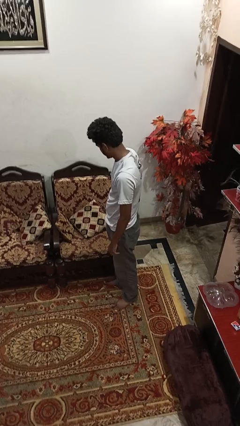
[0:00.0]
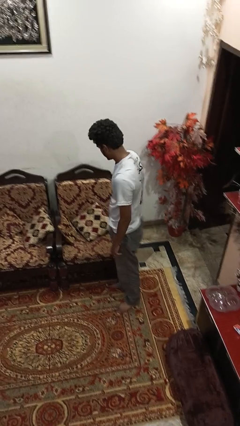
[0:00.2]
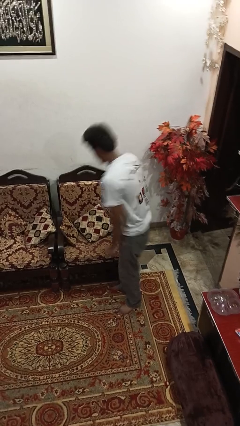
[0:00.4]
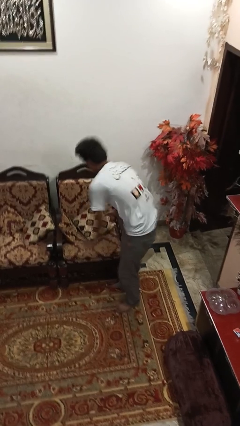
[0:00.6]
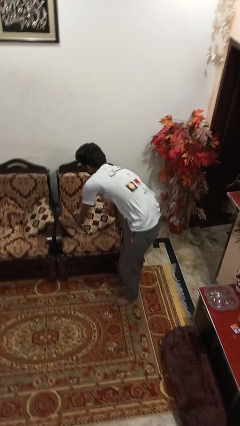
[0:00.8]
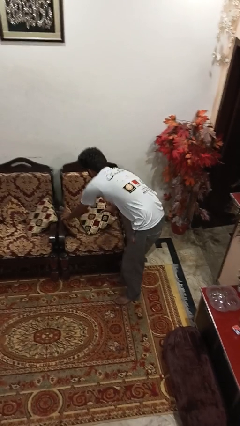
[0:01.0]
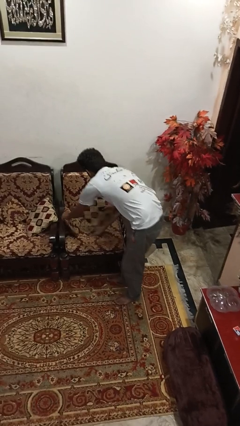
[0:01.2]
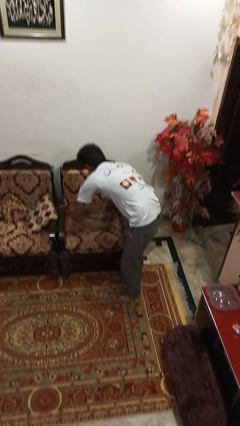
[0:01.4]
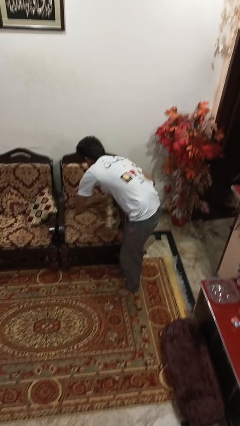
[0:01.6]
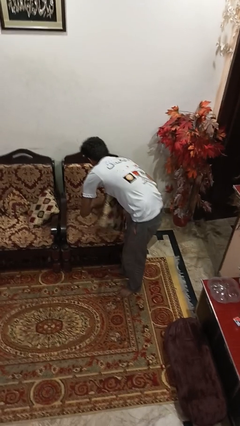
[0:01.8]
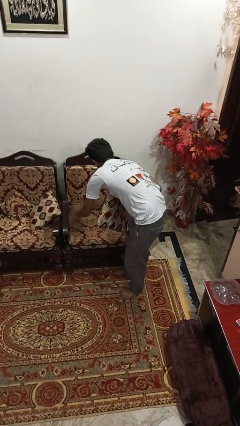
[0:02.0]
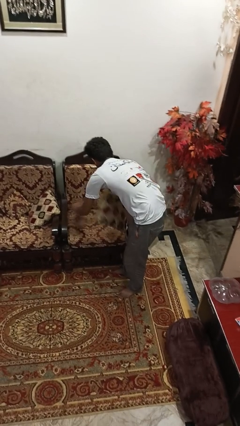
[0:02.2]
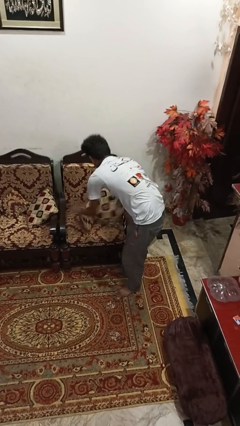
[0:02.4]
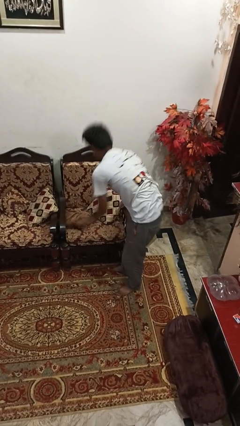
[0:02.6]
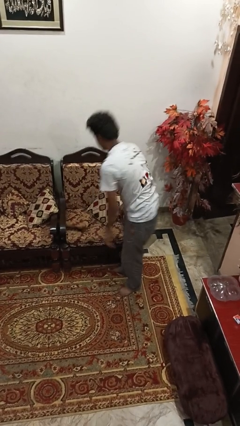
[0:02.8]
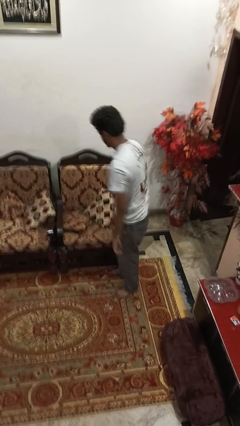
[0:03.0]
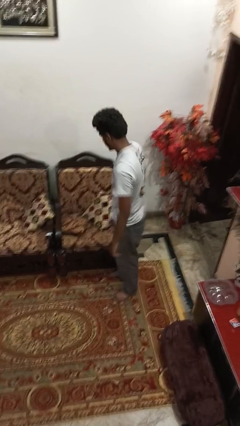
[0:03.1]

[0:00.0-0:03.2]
person searches in couch

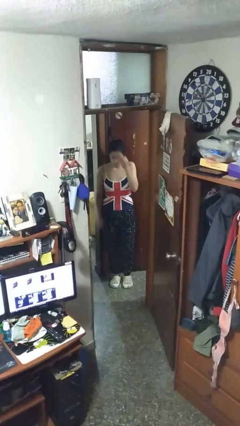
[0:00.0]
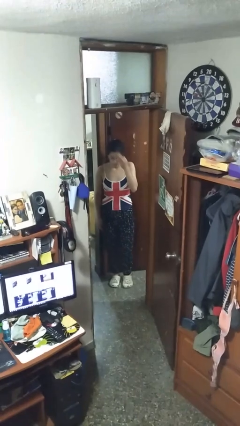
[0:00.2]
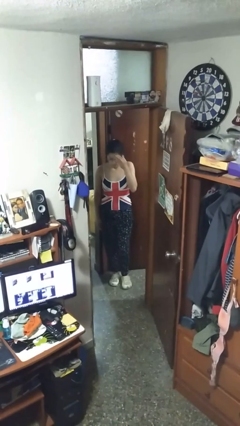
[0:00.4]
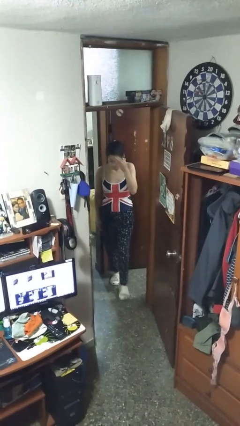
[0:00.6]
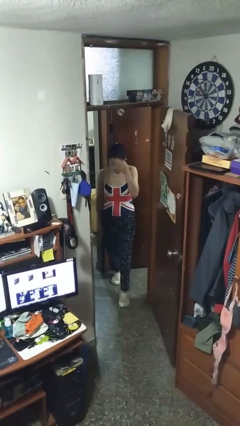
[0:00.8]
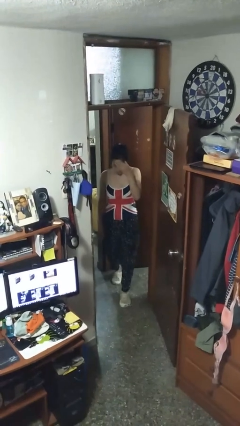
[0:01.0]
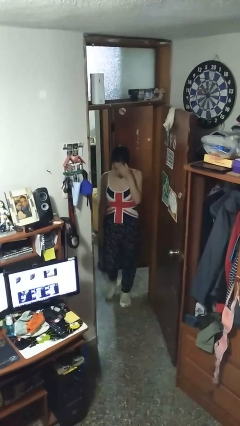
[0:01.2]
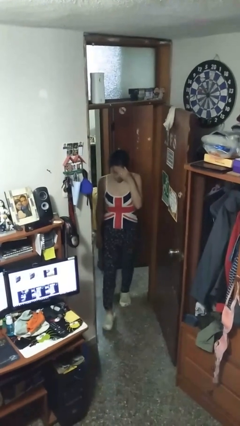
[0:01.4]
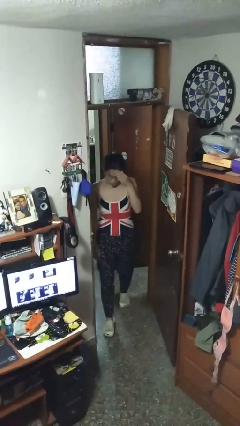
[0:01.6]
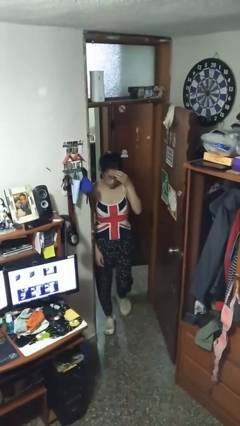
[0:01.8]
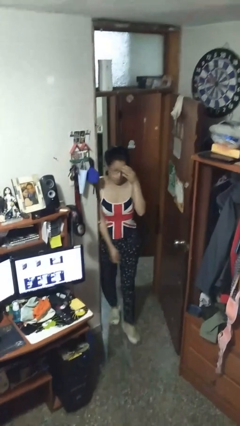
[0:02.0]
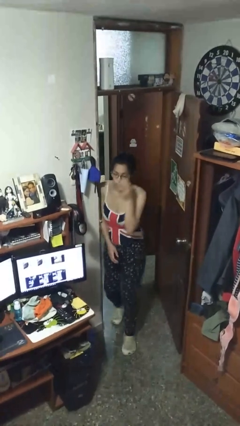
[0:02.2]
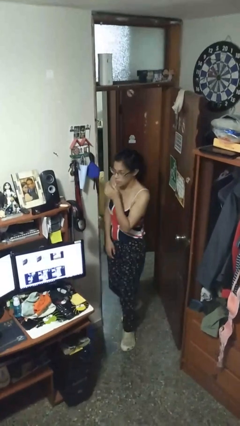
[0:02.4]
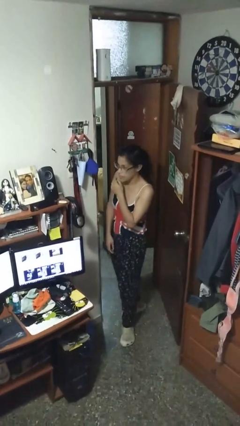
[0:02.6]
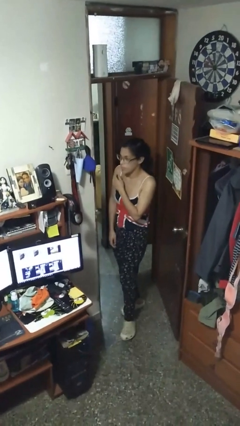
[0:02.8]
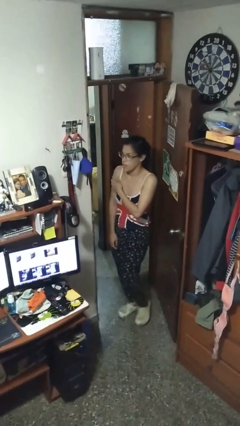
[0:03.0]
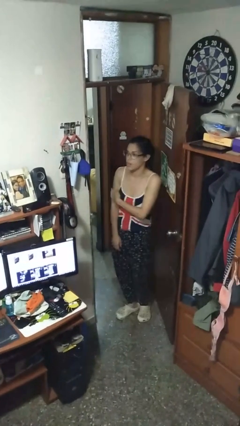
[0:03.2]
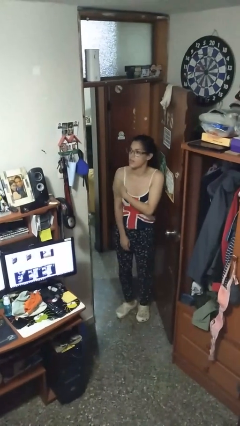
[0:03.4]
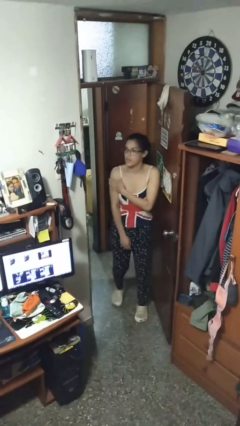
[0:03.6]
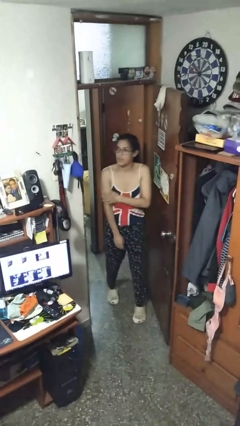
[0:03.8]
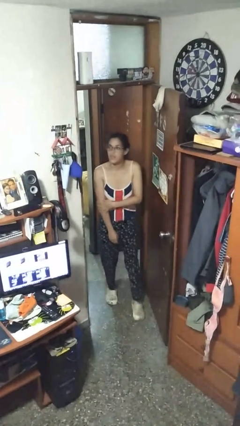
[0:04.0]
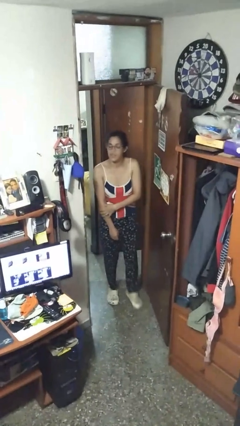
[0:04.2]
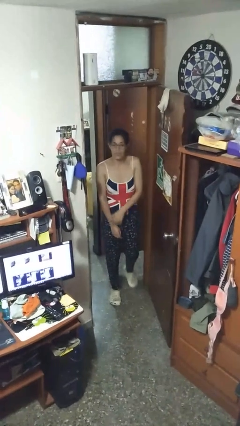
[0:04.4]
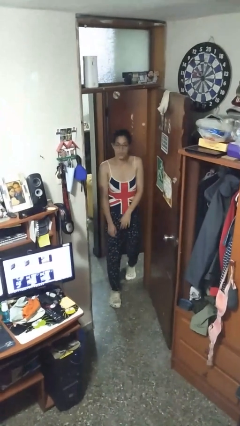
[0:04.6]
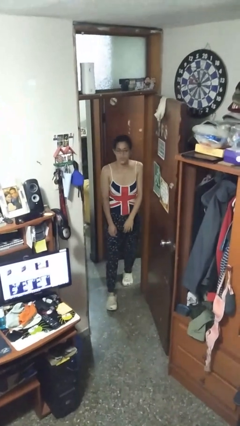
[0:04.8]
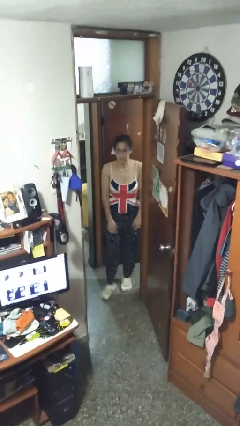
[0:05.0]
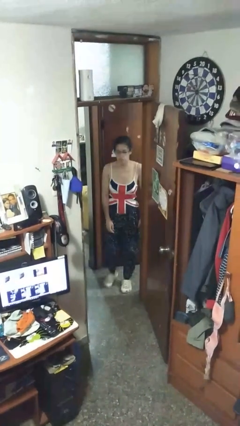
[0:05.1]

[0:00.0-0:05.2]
person bumps into wall

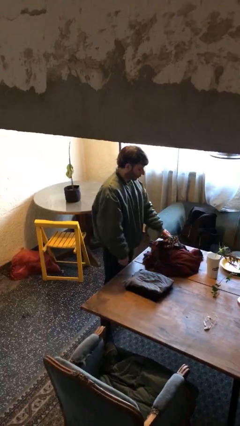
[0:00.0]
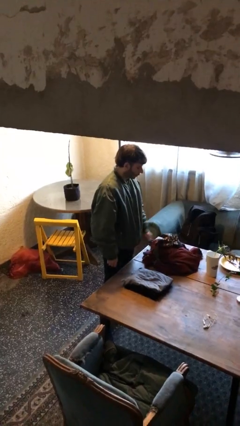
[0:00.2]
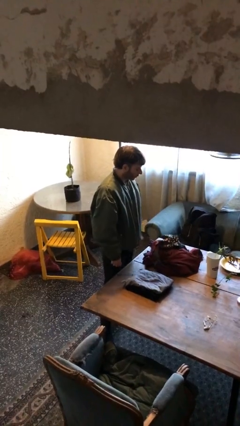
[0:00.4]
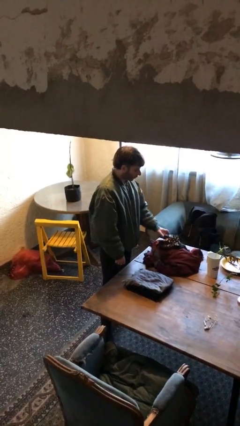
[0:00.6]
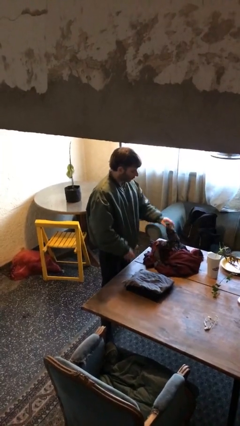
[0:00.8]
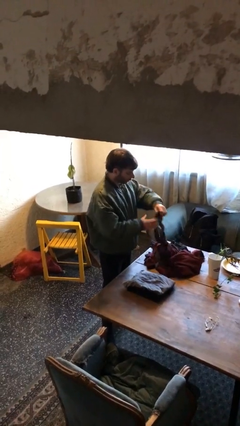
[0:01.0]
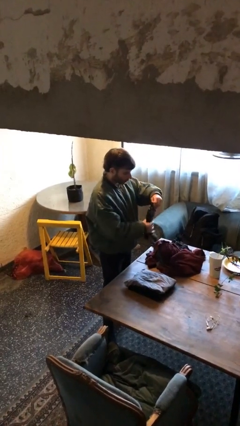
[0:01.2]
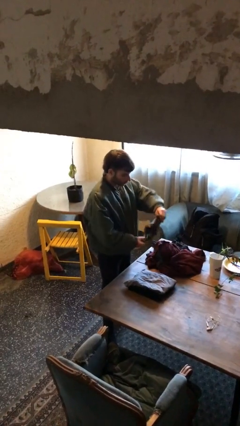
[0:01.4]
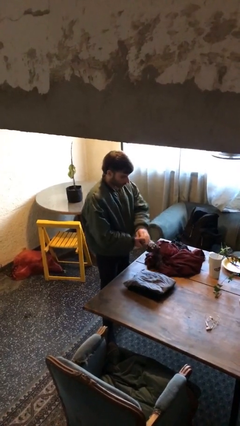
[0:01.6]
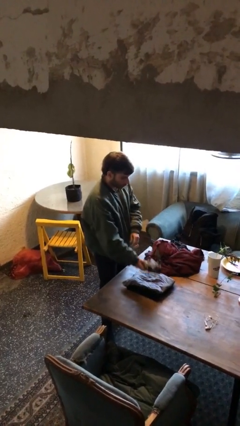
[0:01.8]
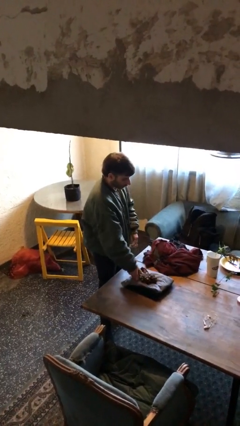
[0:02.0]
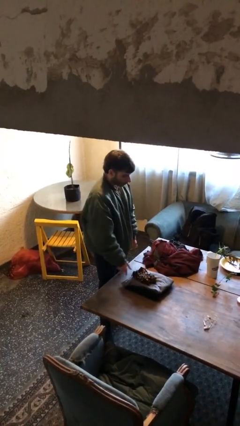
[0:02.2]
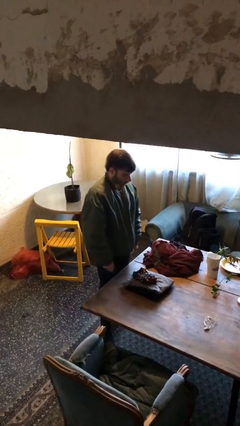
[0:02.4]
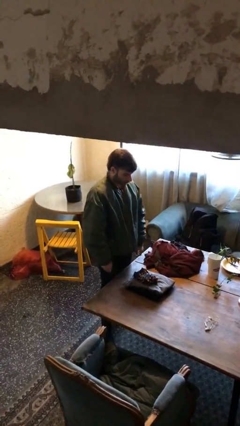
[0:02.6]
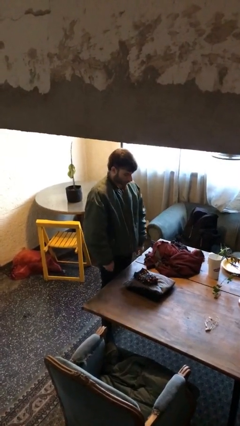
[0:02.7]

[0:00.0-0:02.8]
person folds socks

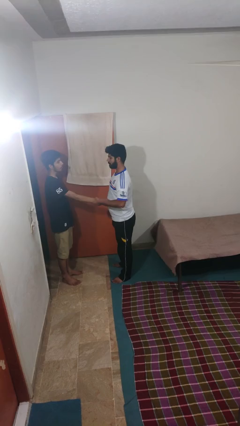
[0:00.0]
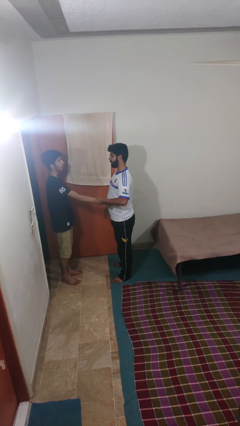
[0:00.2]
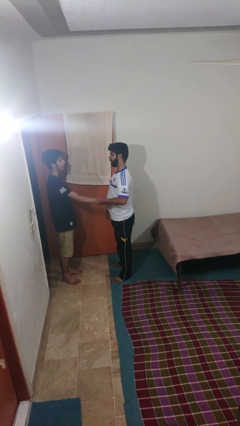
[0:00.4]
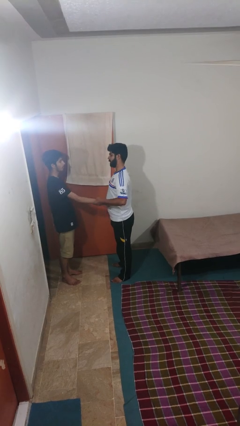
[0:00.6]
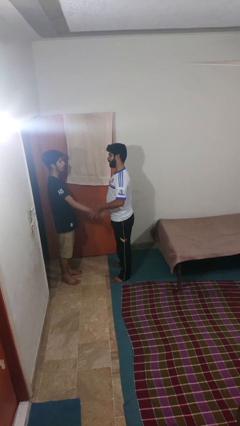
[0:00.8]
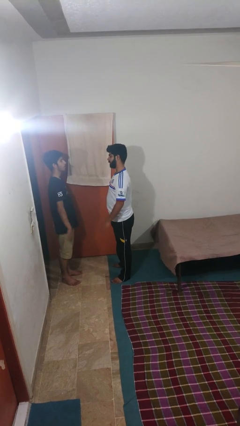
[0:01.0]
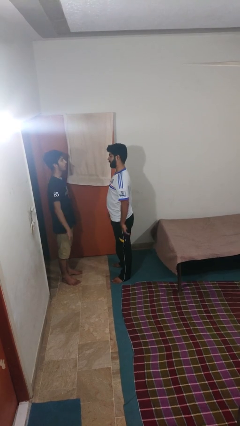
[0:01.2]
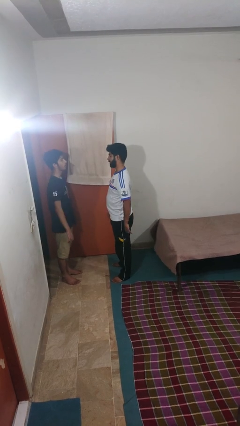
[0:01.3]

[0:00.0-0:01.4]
person grabs person by forearm

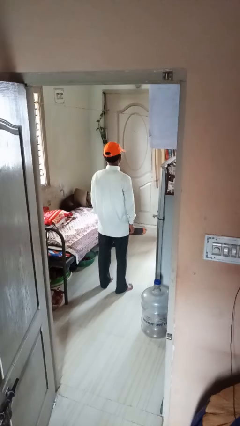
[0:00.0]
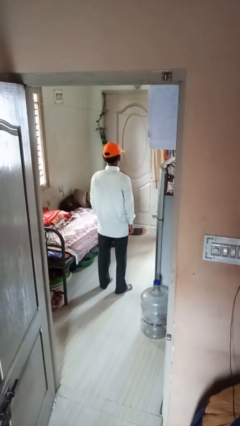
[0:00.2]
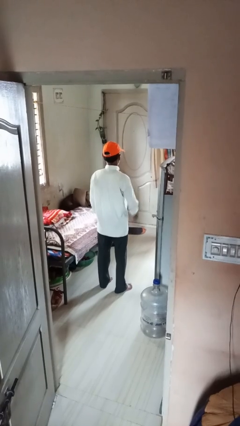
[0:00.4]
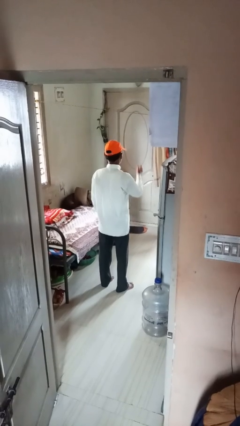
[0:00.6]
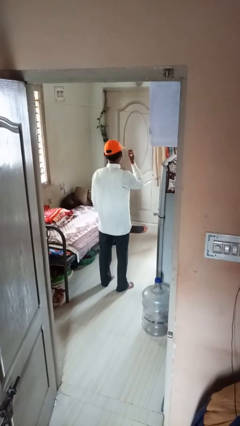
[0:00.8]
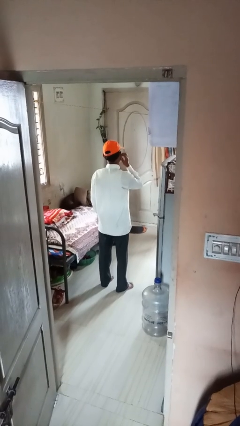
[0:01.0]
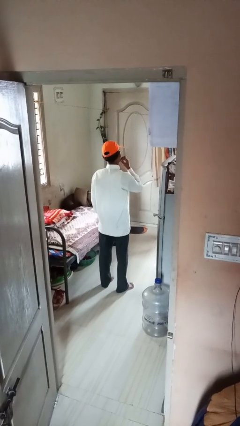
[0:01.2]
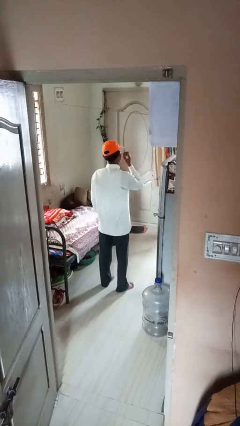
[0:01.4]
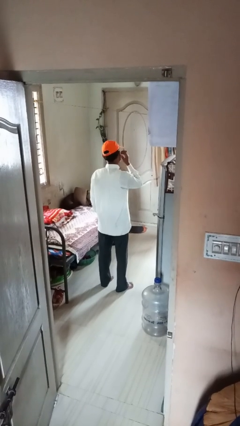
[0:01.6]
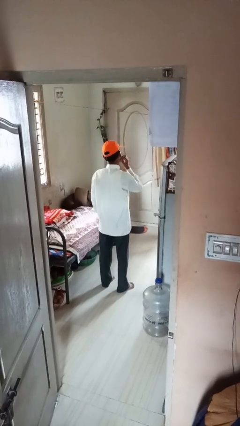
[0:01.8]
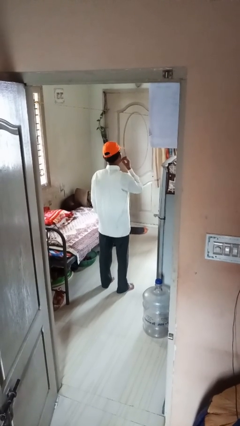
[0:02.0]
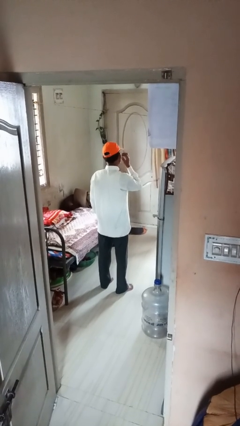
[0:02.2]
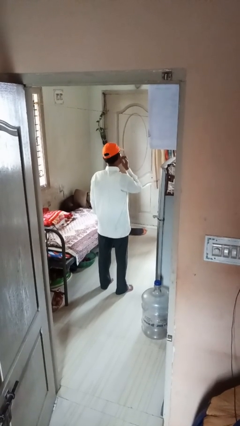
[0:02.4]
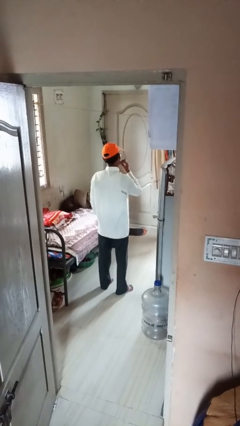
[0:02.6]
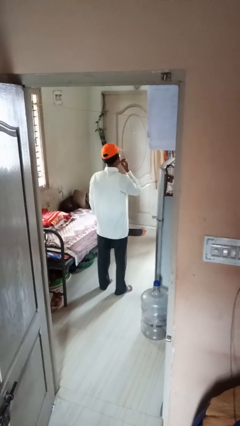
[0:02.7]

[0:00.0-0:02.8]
person scratches face

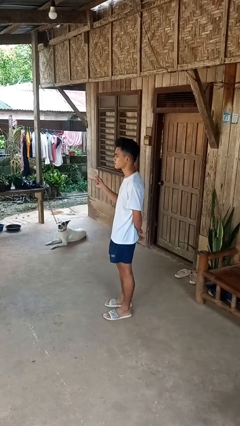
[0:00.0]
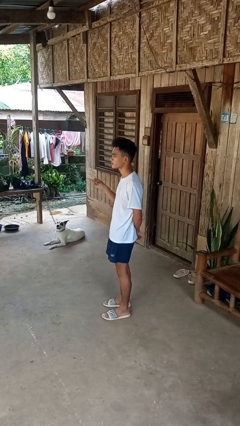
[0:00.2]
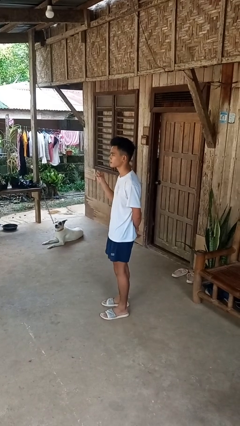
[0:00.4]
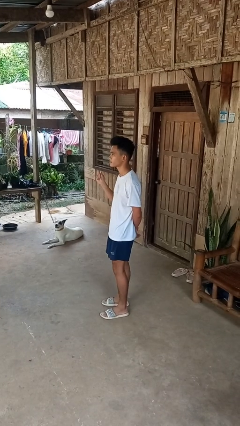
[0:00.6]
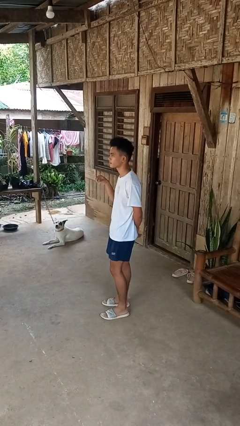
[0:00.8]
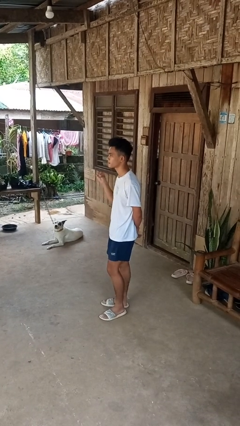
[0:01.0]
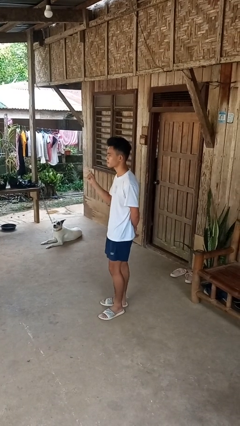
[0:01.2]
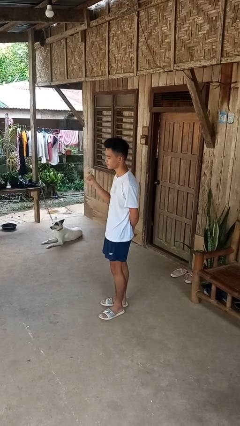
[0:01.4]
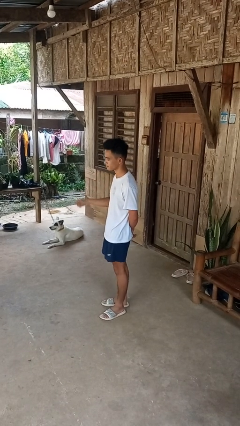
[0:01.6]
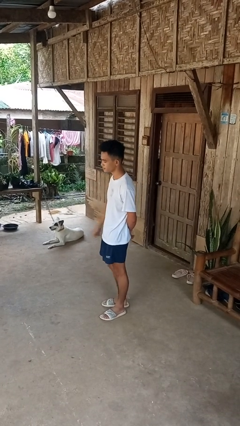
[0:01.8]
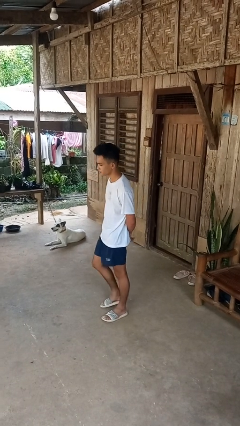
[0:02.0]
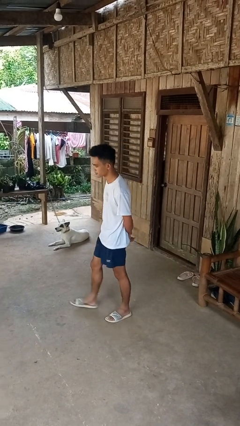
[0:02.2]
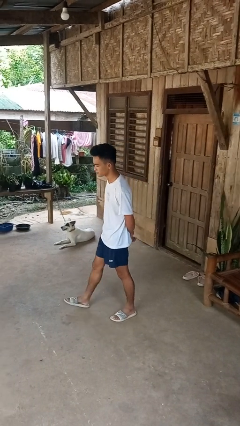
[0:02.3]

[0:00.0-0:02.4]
person snaps fingers
